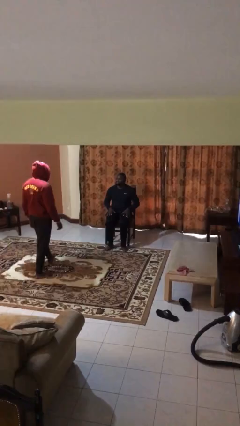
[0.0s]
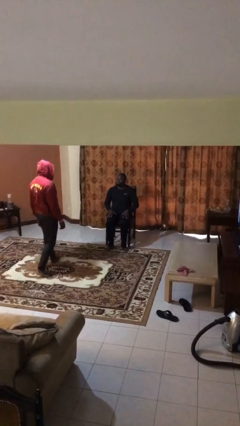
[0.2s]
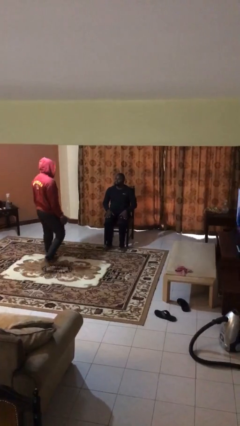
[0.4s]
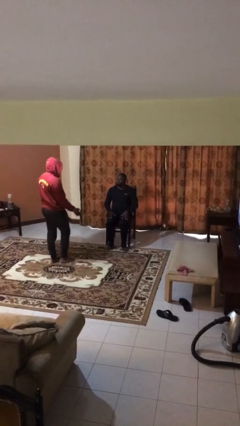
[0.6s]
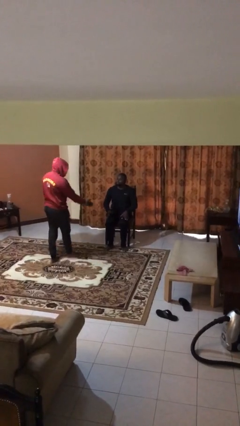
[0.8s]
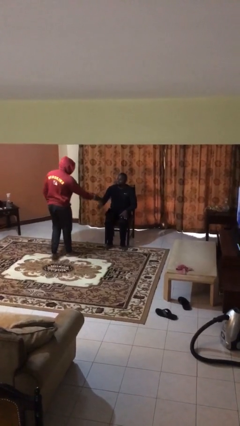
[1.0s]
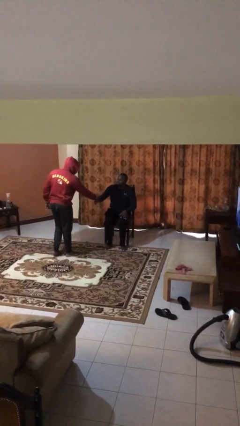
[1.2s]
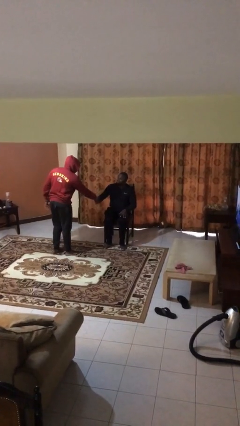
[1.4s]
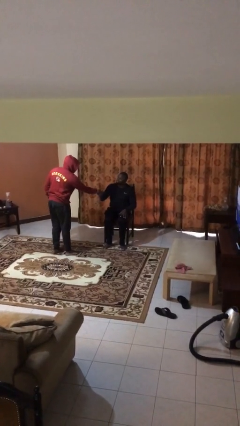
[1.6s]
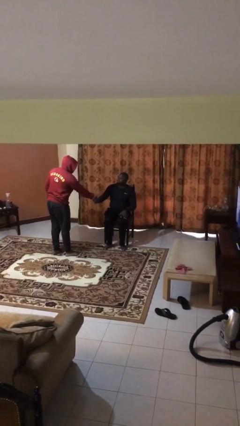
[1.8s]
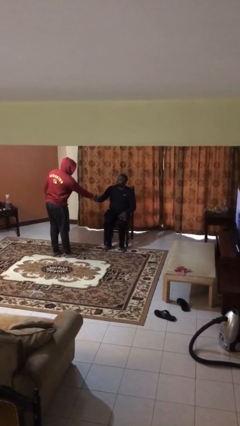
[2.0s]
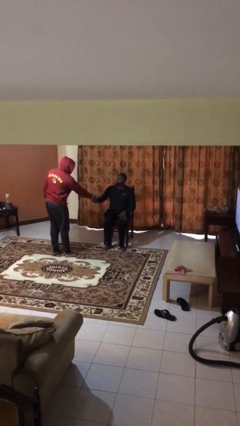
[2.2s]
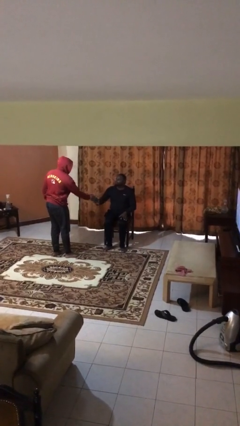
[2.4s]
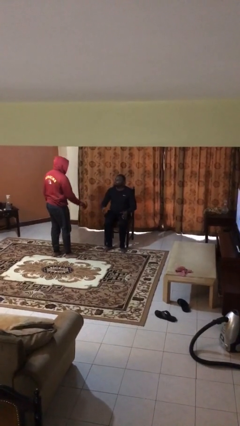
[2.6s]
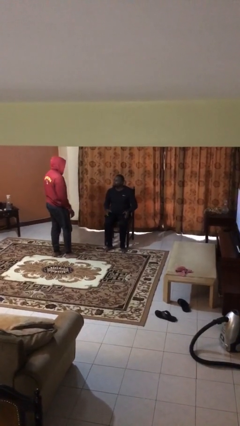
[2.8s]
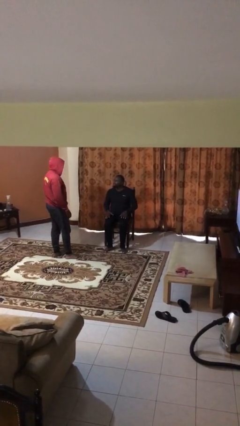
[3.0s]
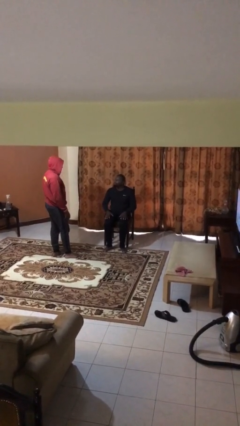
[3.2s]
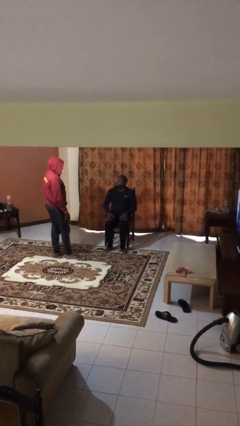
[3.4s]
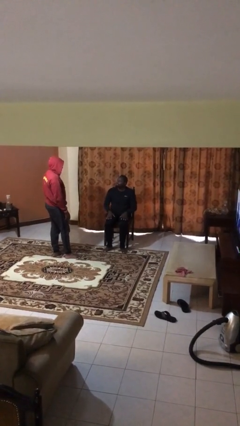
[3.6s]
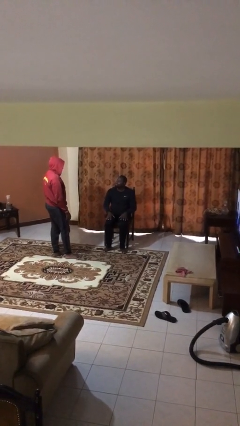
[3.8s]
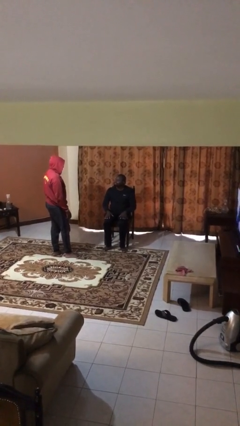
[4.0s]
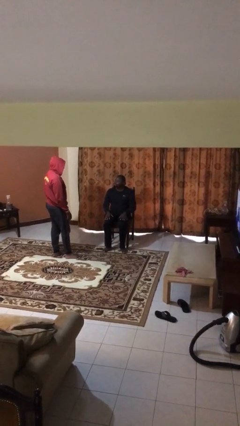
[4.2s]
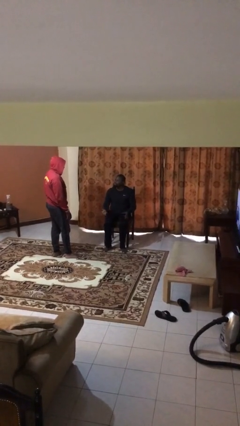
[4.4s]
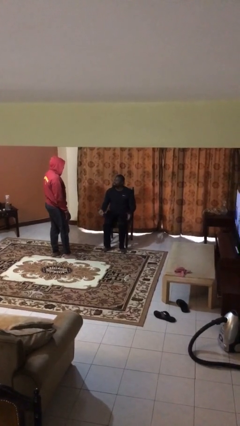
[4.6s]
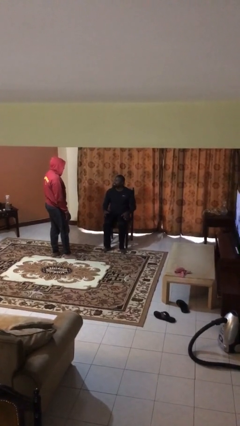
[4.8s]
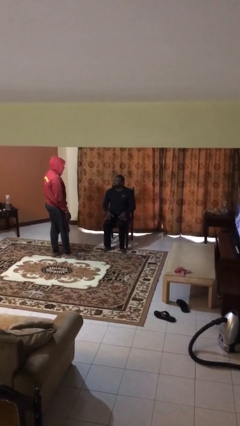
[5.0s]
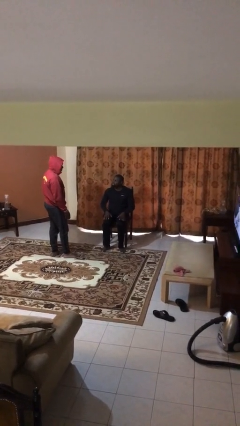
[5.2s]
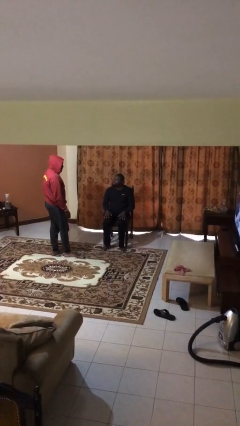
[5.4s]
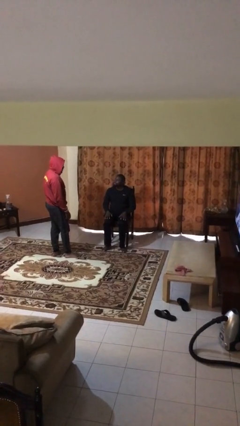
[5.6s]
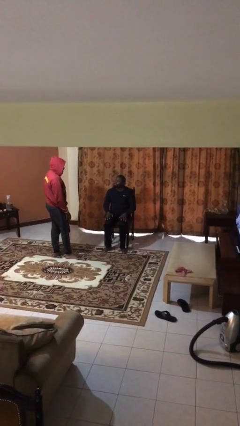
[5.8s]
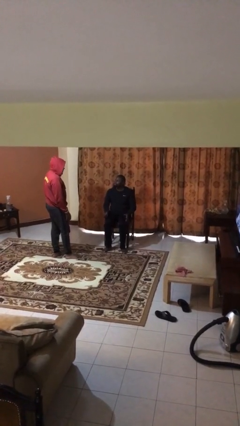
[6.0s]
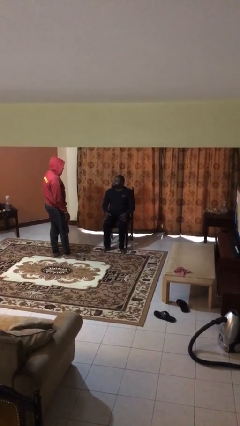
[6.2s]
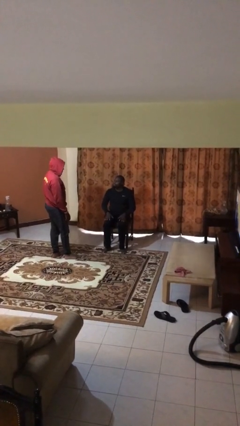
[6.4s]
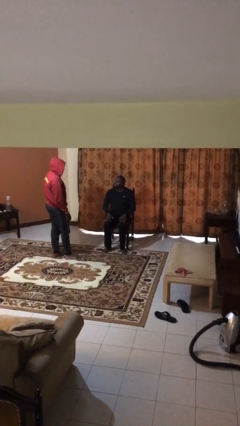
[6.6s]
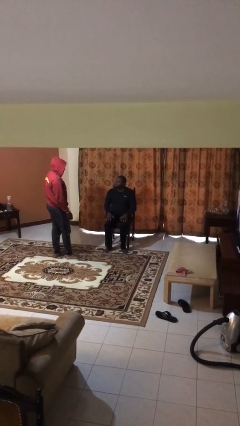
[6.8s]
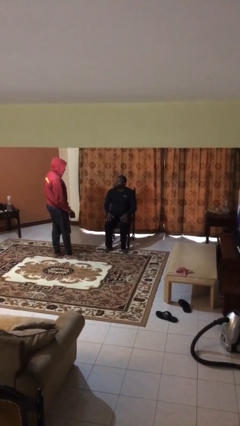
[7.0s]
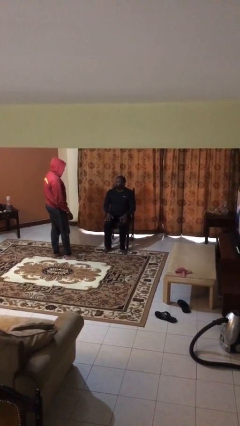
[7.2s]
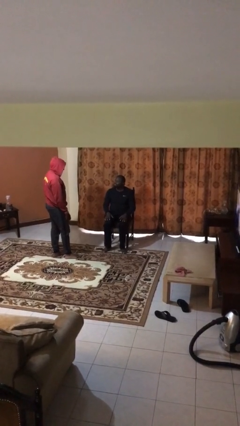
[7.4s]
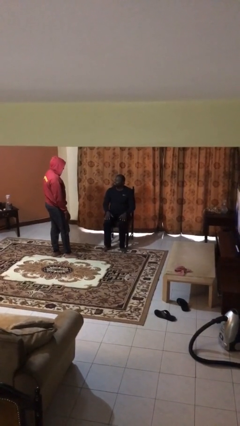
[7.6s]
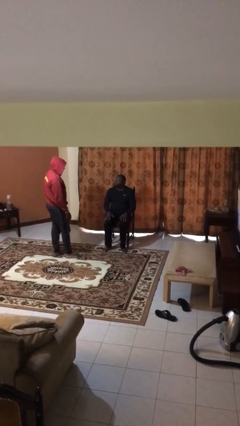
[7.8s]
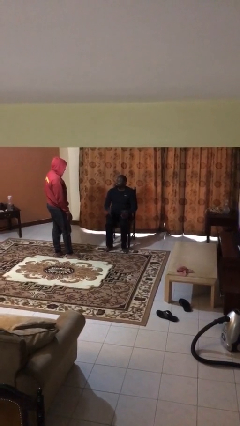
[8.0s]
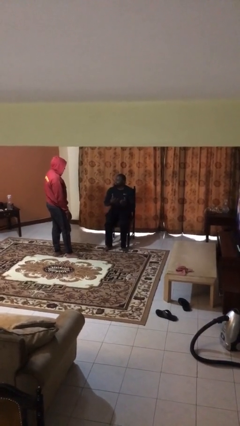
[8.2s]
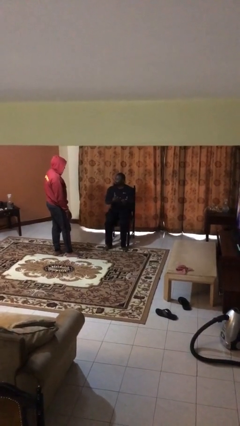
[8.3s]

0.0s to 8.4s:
person shakes hand

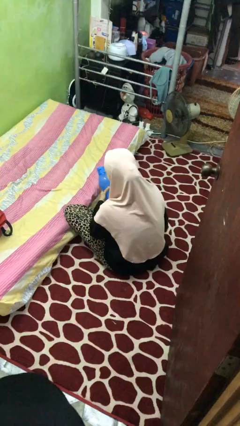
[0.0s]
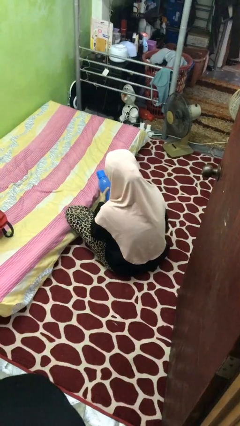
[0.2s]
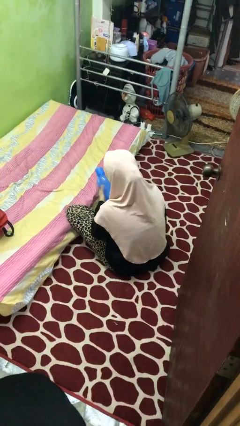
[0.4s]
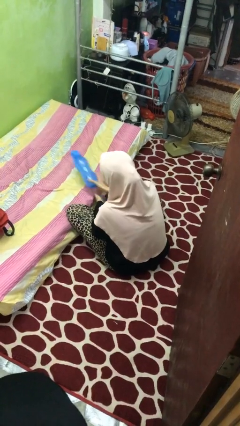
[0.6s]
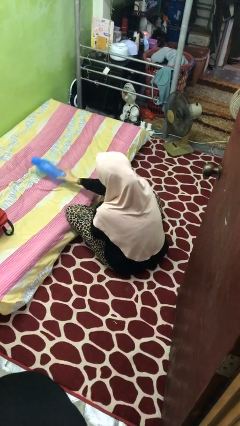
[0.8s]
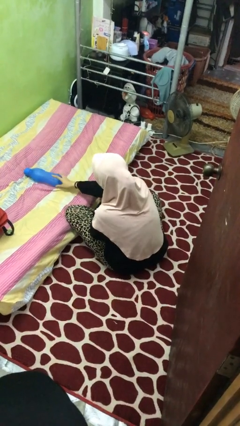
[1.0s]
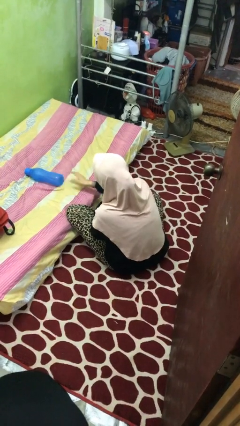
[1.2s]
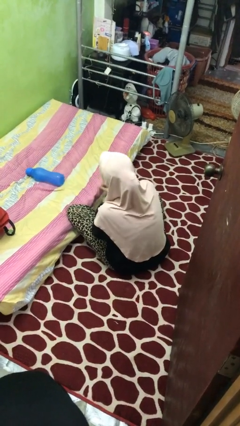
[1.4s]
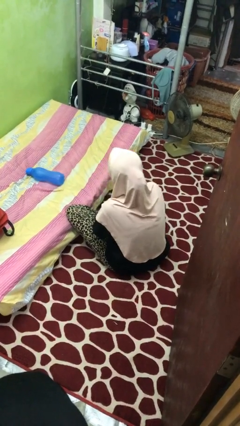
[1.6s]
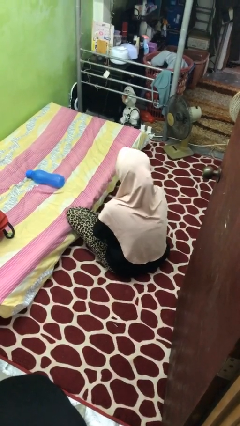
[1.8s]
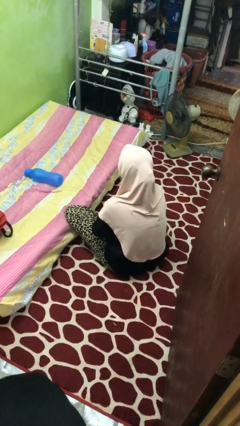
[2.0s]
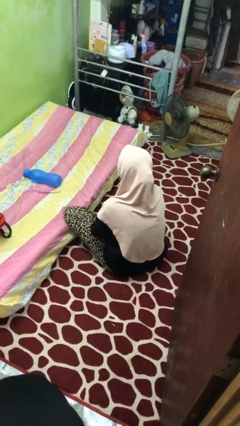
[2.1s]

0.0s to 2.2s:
person puts down object on bed

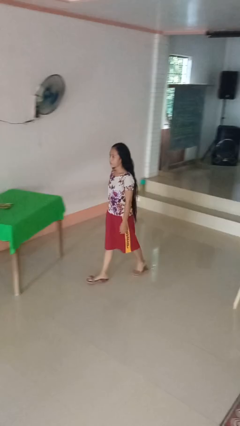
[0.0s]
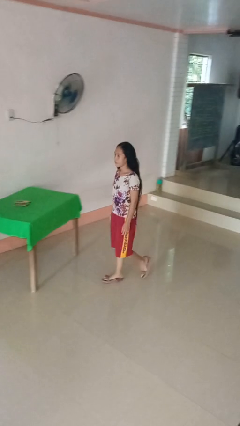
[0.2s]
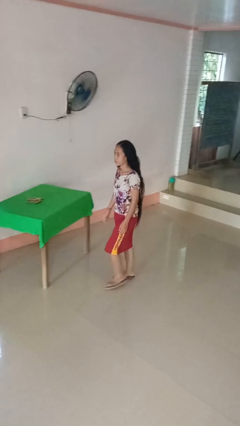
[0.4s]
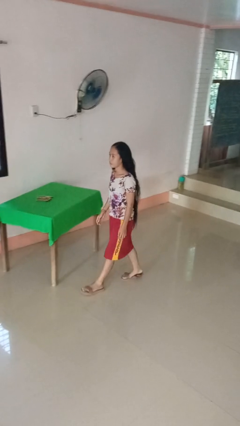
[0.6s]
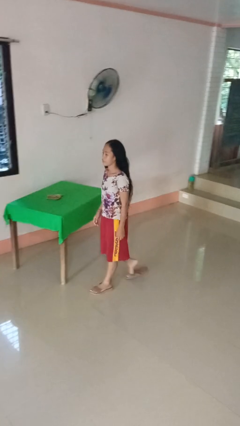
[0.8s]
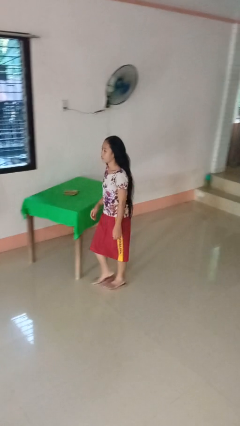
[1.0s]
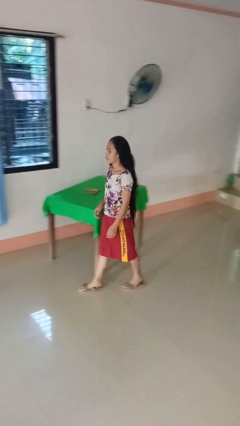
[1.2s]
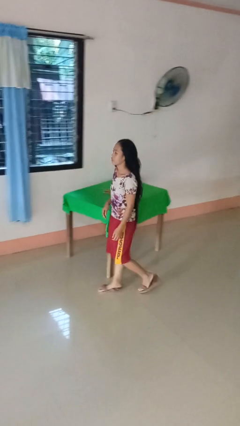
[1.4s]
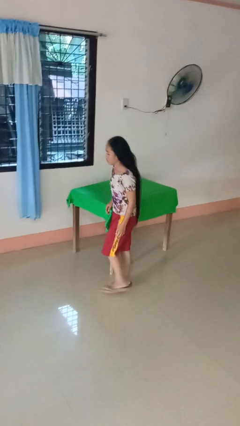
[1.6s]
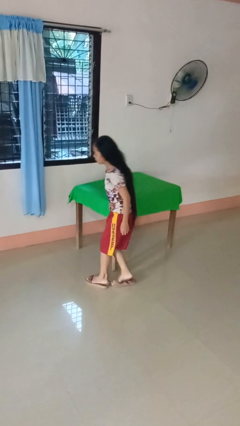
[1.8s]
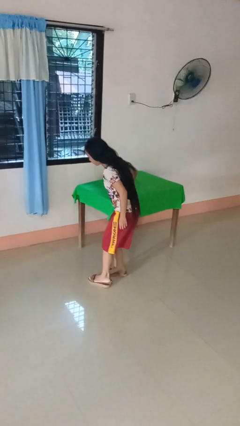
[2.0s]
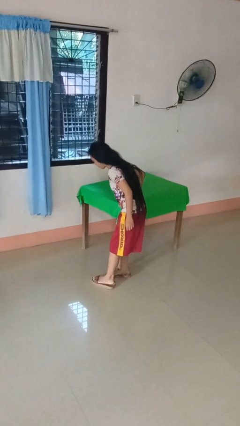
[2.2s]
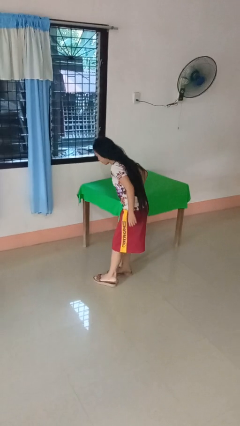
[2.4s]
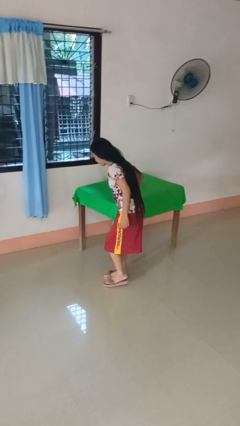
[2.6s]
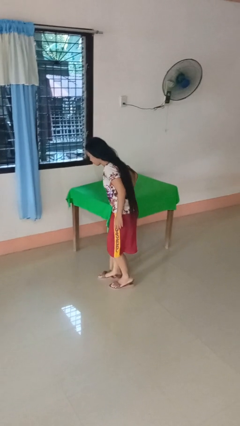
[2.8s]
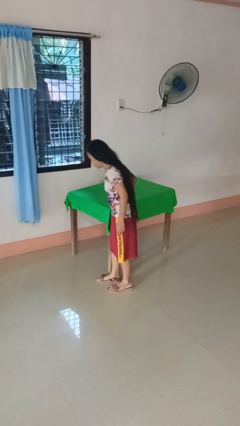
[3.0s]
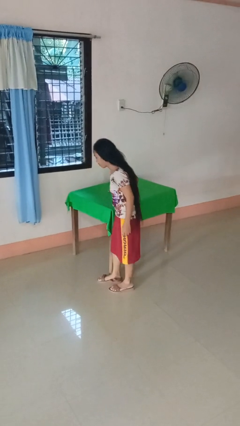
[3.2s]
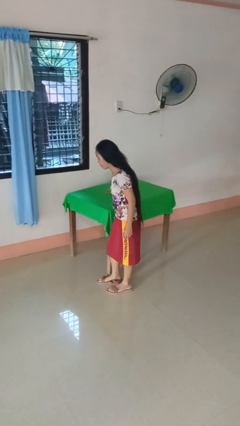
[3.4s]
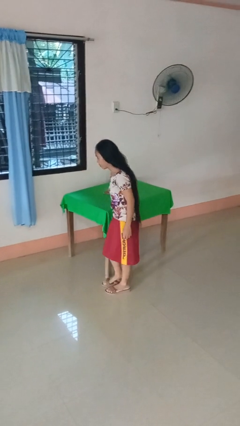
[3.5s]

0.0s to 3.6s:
person bumps into table

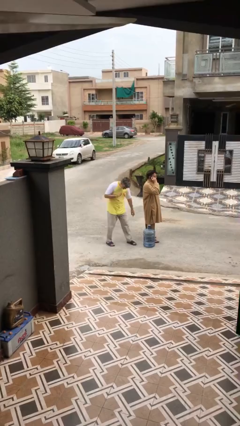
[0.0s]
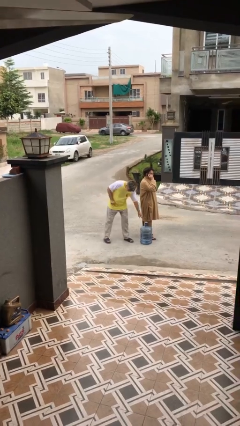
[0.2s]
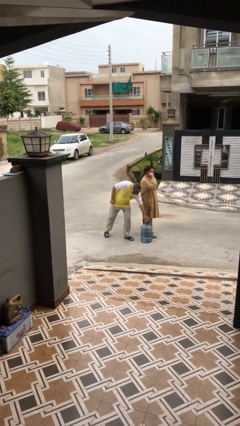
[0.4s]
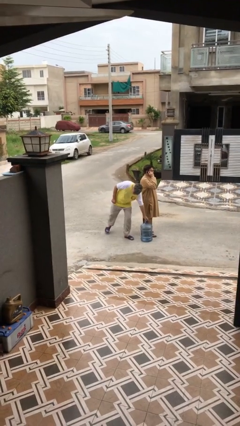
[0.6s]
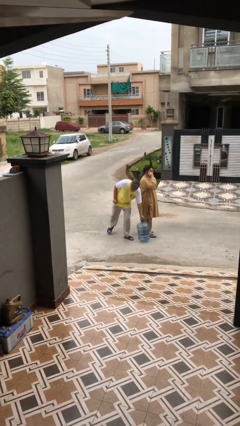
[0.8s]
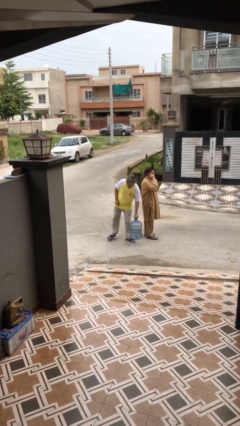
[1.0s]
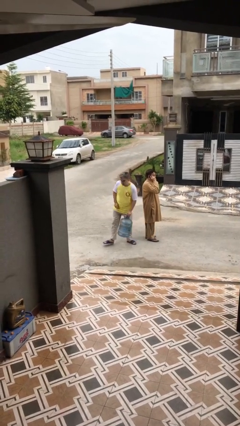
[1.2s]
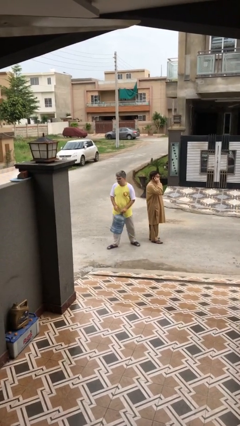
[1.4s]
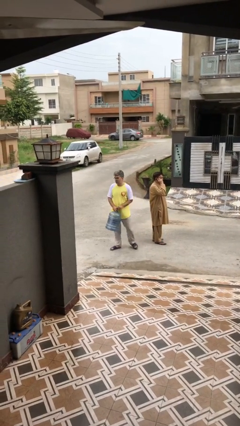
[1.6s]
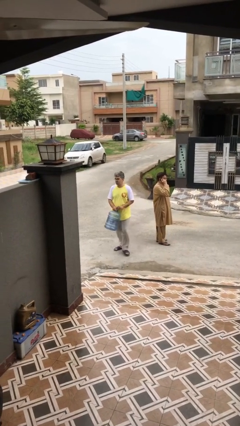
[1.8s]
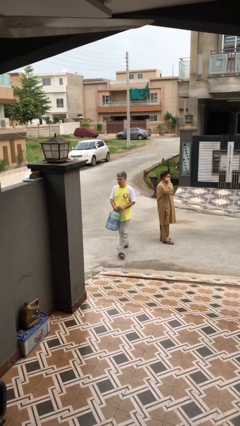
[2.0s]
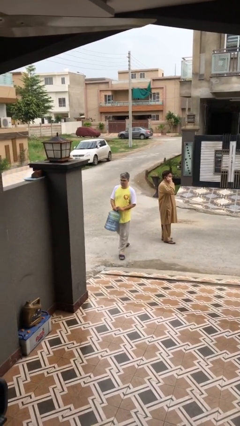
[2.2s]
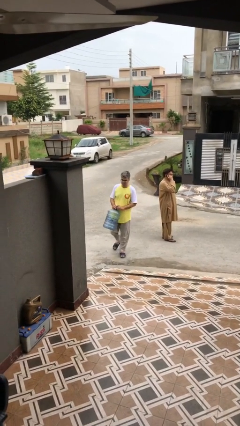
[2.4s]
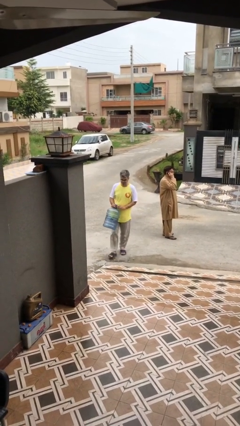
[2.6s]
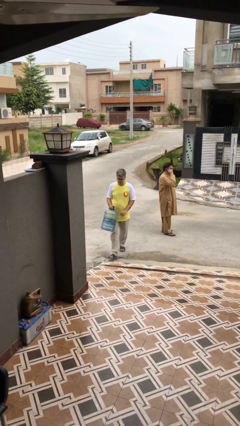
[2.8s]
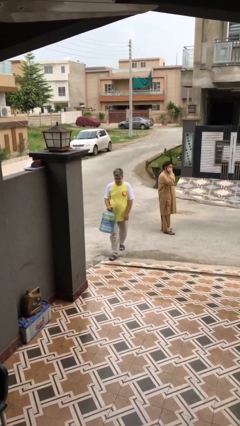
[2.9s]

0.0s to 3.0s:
person steals object from person

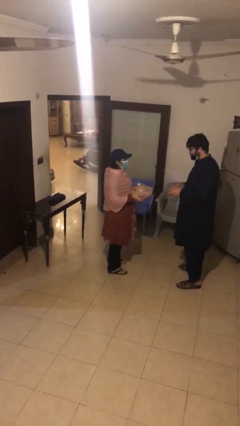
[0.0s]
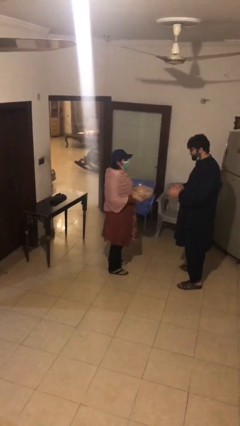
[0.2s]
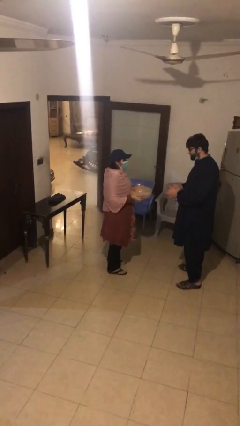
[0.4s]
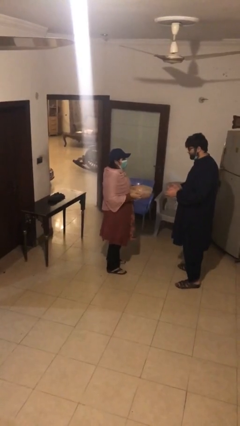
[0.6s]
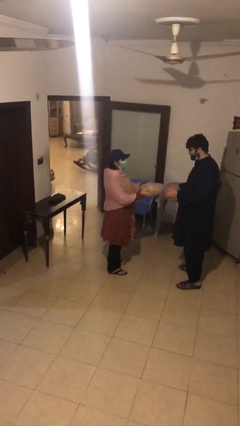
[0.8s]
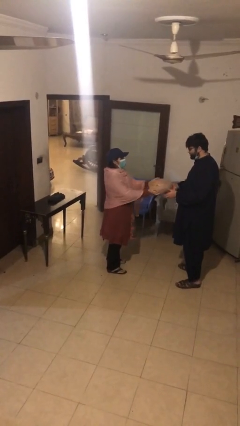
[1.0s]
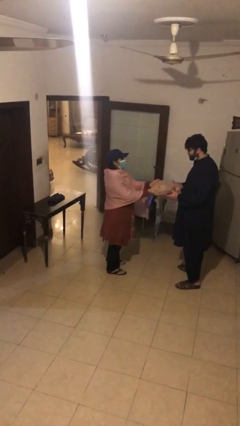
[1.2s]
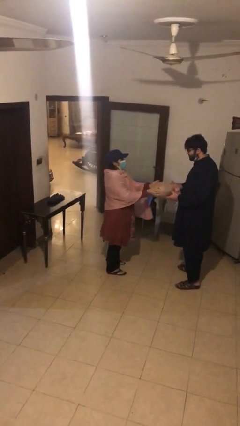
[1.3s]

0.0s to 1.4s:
person transfers object to person
